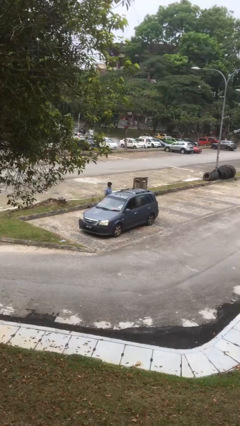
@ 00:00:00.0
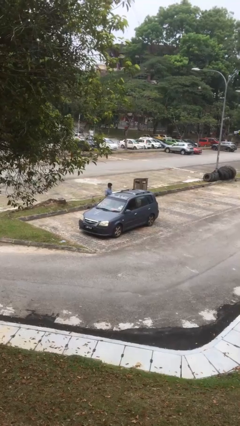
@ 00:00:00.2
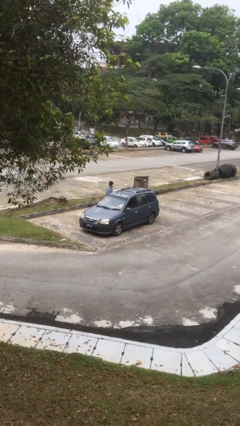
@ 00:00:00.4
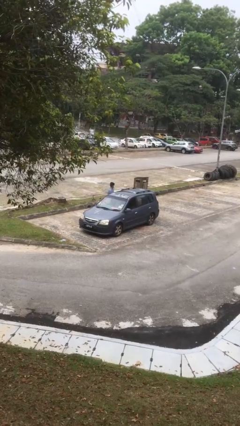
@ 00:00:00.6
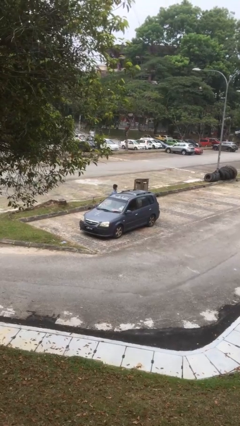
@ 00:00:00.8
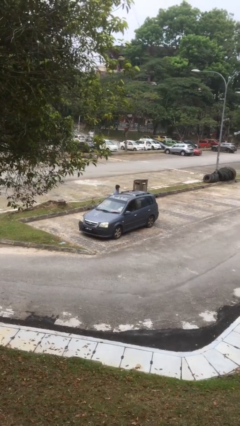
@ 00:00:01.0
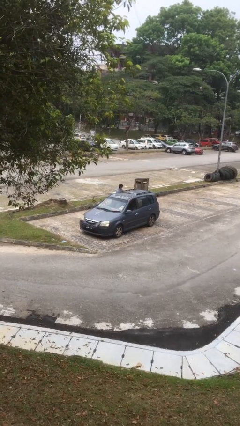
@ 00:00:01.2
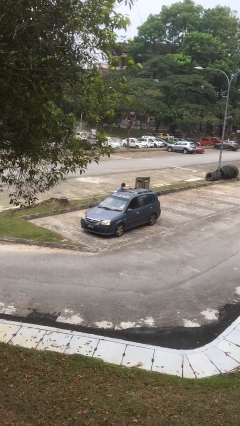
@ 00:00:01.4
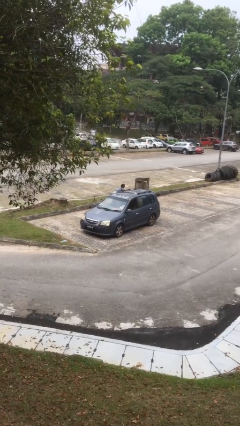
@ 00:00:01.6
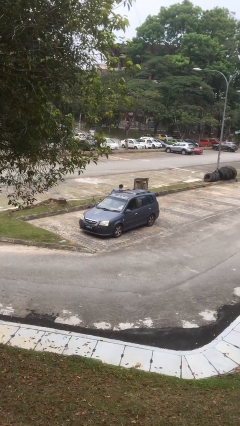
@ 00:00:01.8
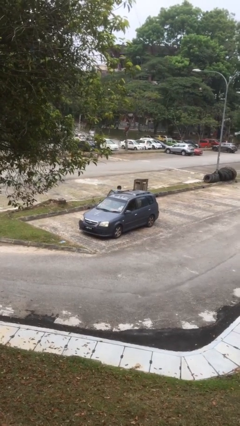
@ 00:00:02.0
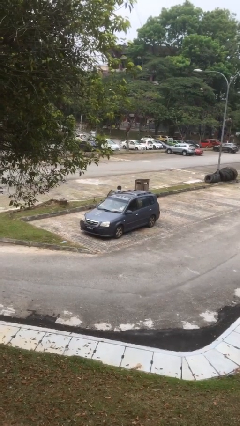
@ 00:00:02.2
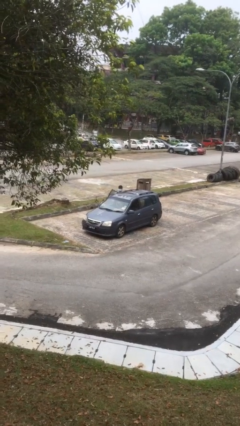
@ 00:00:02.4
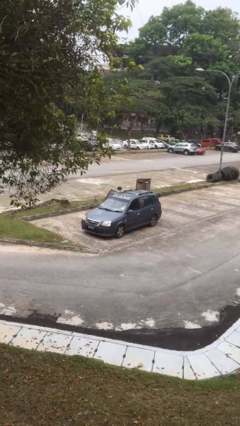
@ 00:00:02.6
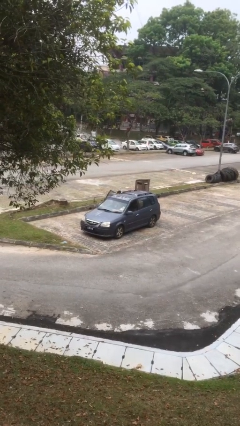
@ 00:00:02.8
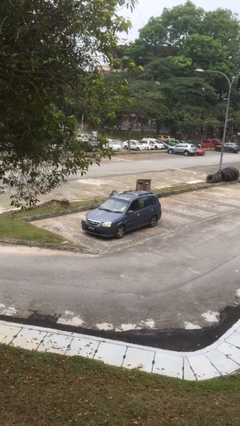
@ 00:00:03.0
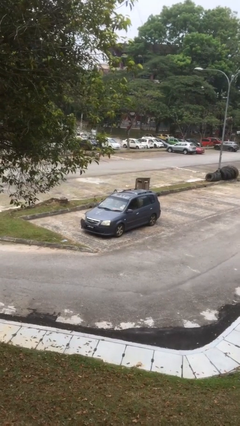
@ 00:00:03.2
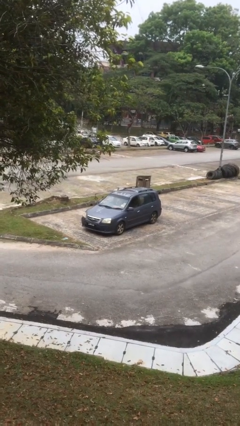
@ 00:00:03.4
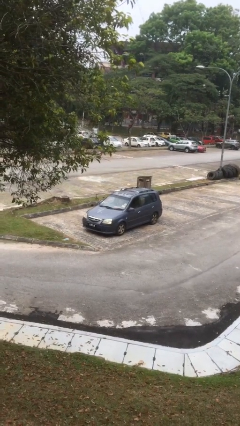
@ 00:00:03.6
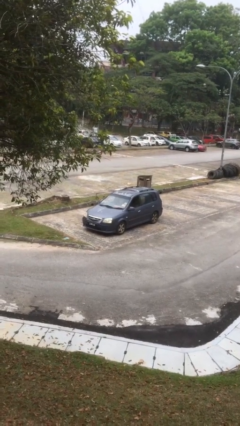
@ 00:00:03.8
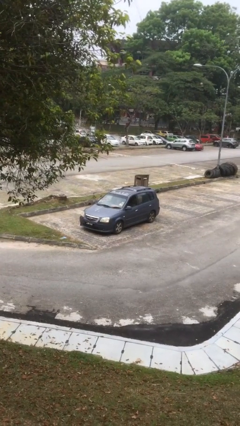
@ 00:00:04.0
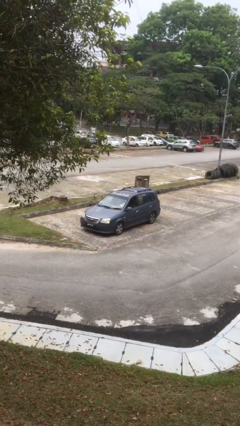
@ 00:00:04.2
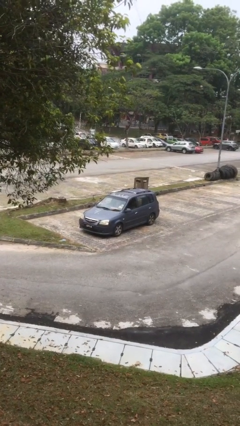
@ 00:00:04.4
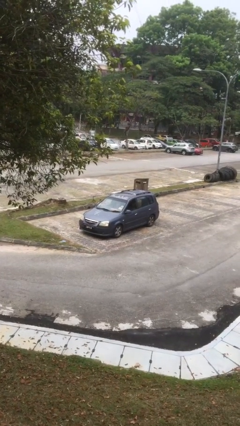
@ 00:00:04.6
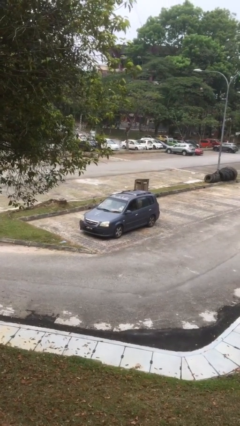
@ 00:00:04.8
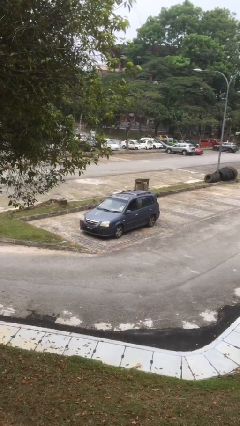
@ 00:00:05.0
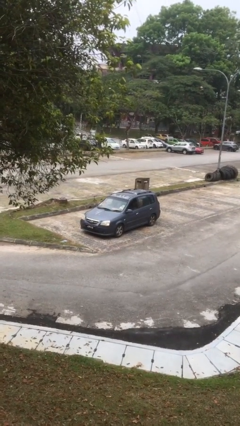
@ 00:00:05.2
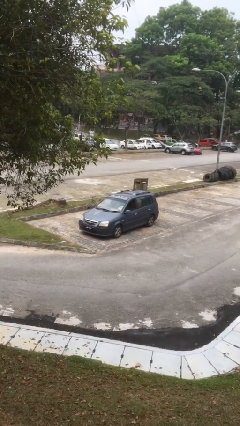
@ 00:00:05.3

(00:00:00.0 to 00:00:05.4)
car picks up person

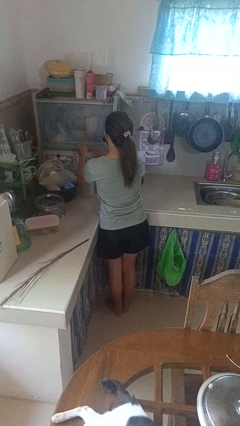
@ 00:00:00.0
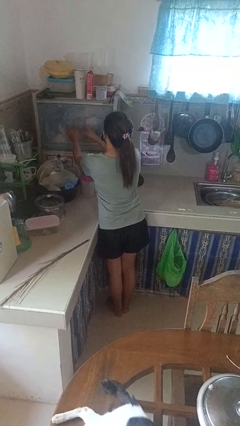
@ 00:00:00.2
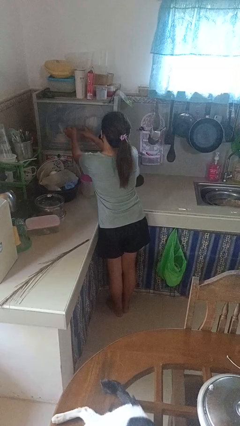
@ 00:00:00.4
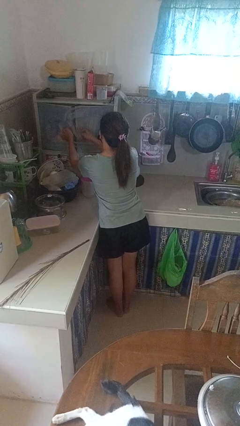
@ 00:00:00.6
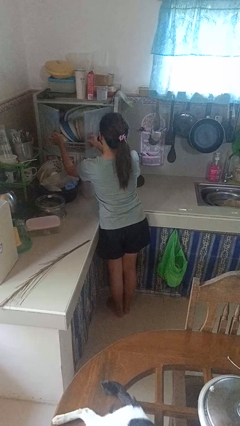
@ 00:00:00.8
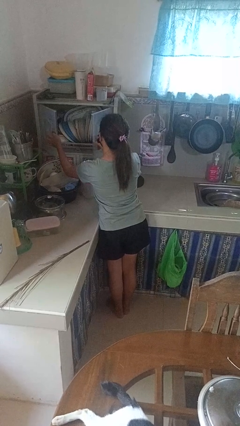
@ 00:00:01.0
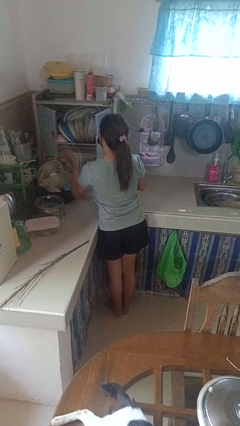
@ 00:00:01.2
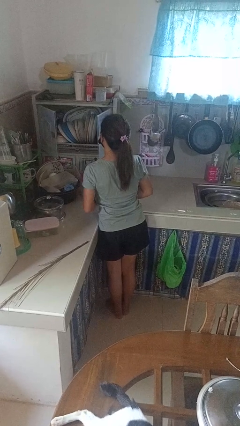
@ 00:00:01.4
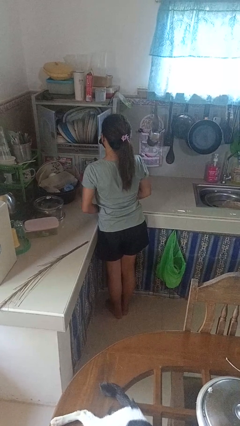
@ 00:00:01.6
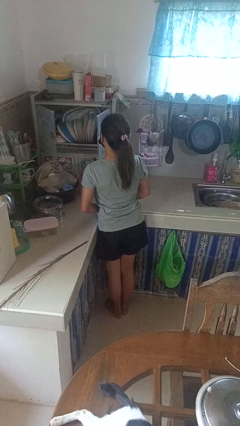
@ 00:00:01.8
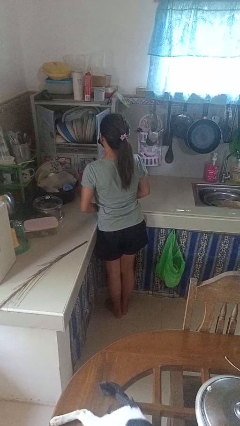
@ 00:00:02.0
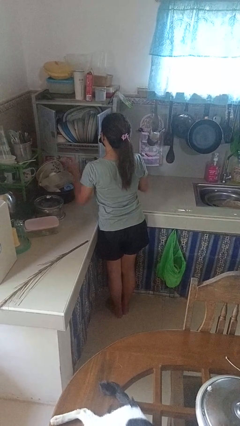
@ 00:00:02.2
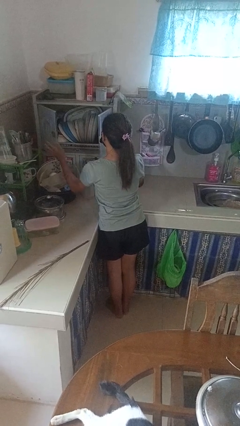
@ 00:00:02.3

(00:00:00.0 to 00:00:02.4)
person opens kitchen drawer

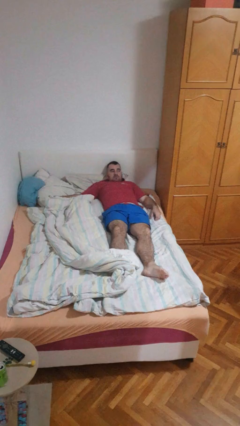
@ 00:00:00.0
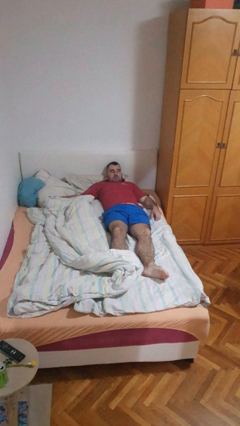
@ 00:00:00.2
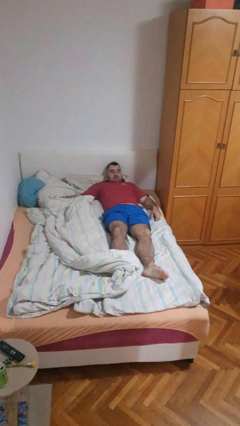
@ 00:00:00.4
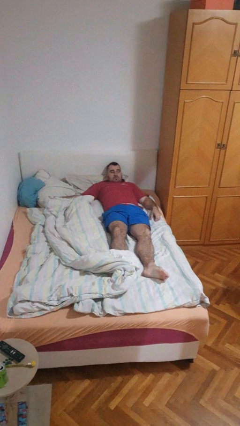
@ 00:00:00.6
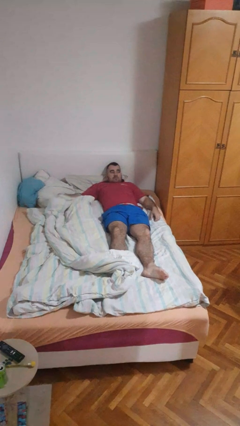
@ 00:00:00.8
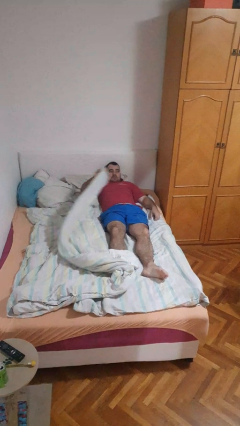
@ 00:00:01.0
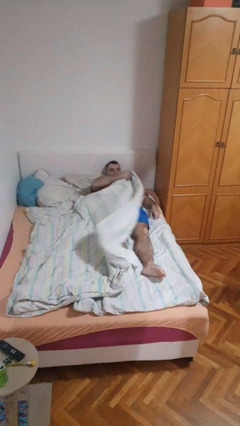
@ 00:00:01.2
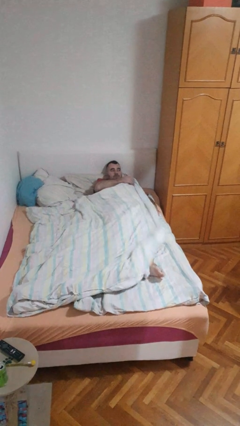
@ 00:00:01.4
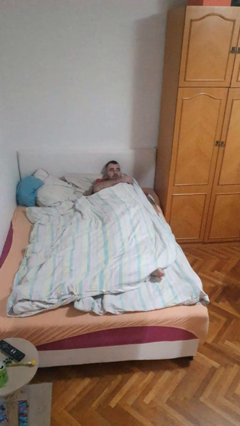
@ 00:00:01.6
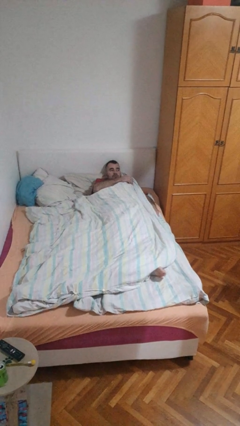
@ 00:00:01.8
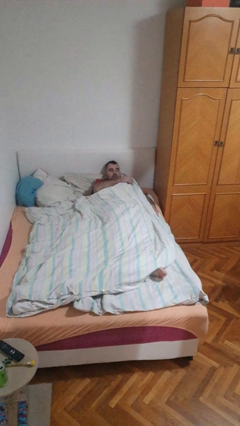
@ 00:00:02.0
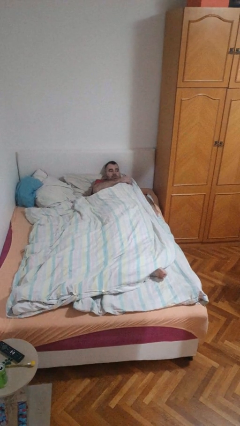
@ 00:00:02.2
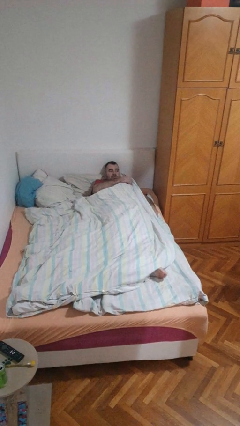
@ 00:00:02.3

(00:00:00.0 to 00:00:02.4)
person covers with bedsheets

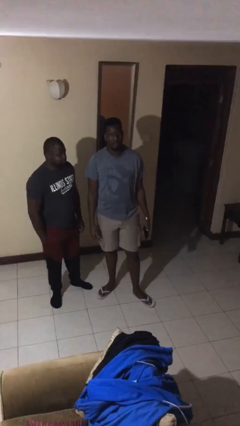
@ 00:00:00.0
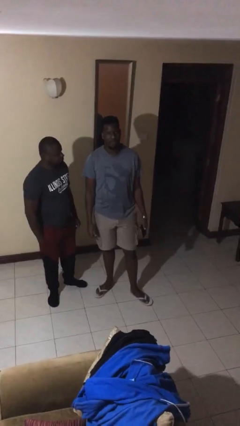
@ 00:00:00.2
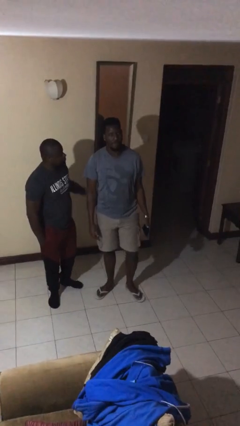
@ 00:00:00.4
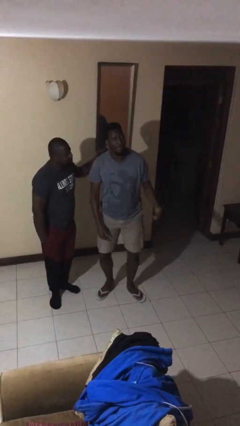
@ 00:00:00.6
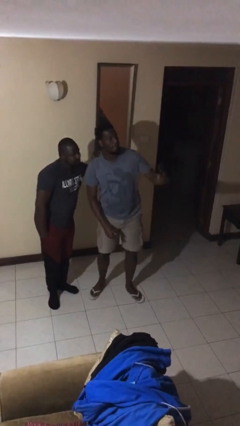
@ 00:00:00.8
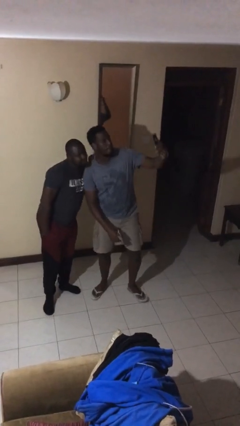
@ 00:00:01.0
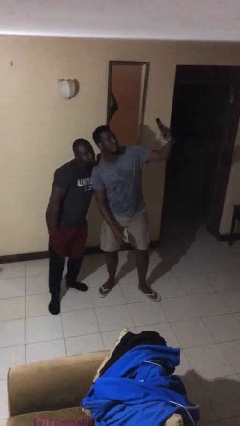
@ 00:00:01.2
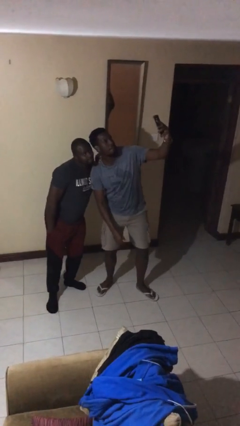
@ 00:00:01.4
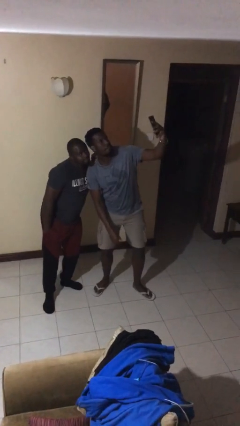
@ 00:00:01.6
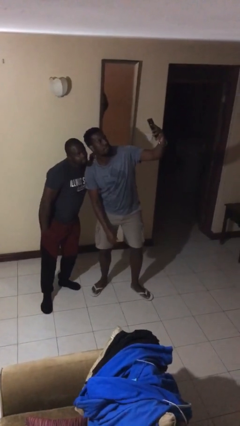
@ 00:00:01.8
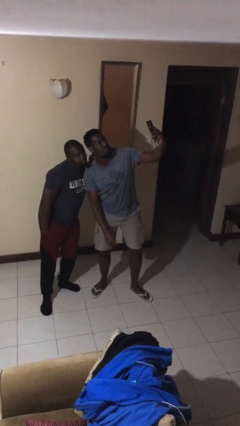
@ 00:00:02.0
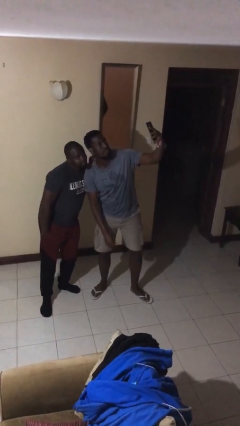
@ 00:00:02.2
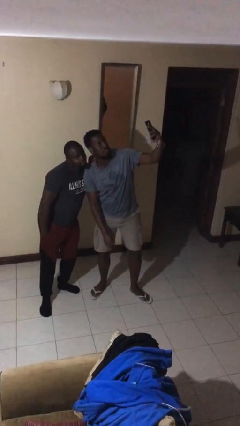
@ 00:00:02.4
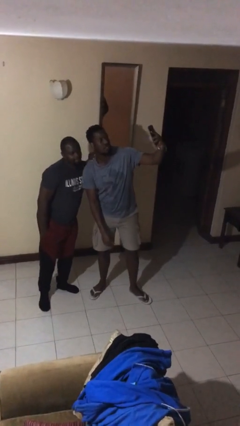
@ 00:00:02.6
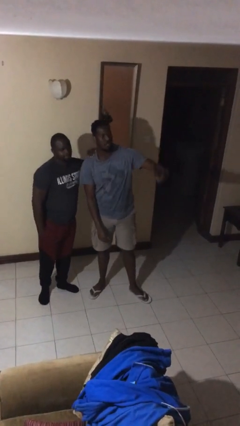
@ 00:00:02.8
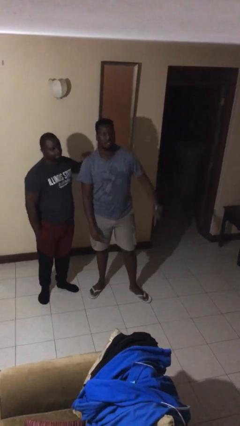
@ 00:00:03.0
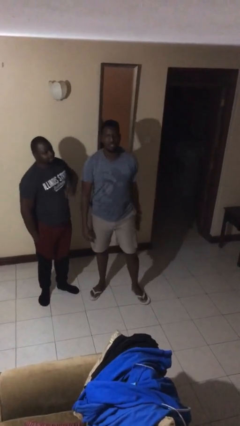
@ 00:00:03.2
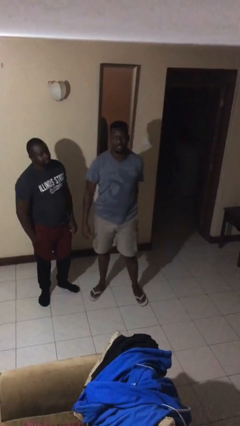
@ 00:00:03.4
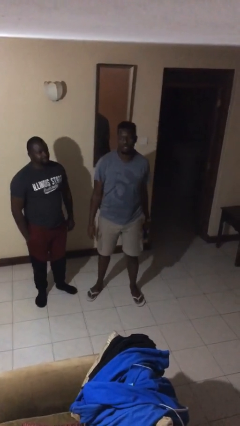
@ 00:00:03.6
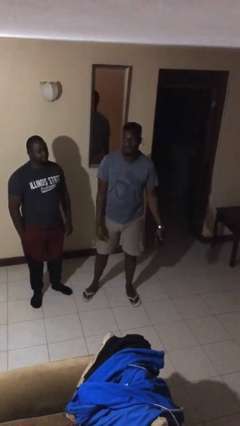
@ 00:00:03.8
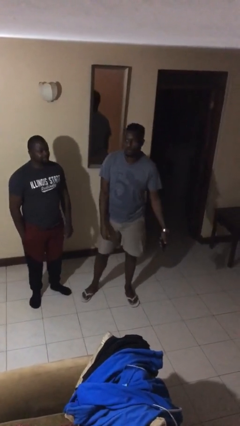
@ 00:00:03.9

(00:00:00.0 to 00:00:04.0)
person takes selfie with person

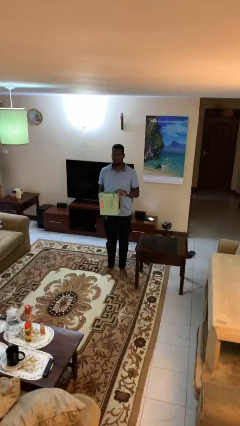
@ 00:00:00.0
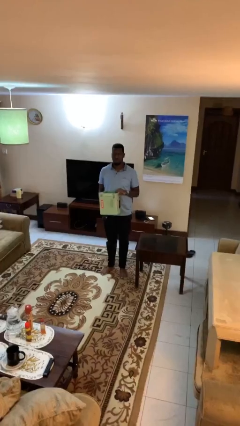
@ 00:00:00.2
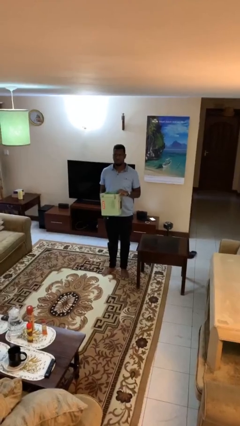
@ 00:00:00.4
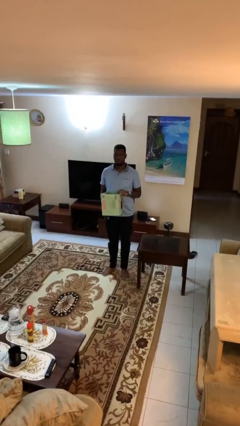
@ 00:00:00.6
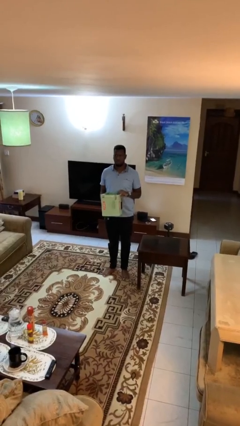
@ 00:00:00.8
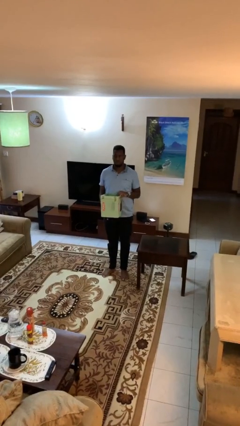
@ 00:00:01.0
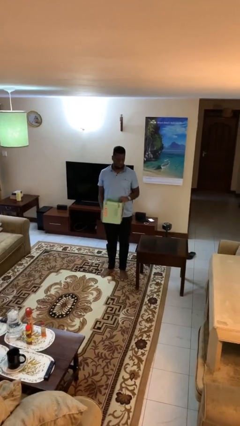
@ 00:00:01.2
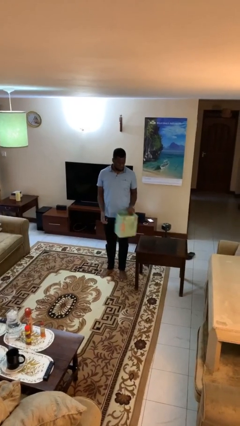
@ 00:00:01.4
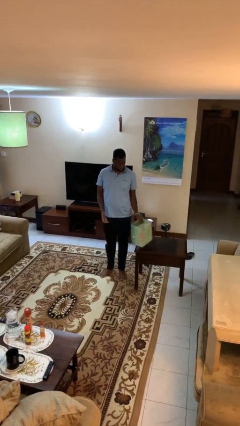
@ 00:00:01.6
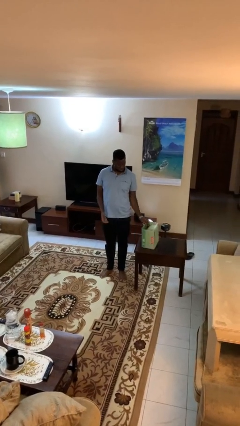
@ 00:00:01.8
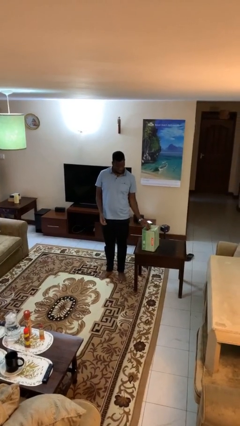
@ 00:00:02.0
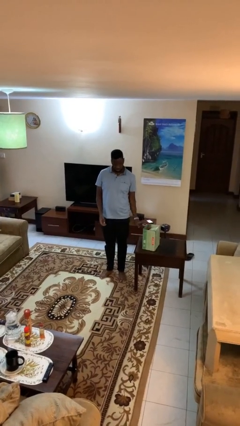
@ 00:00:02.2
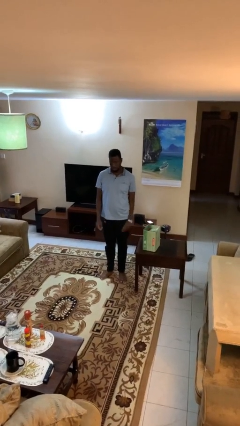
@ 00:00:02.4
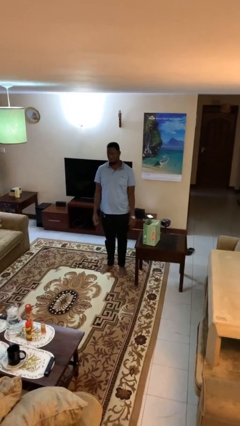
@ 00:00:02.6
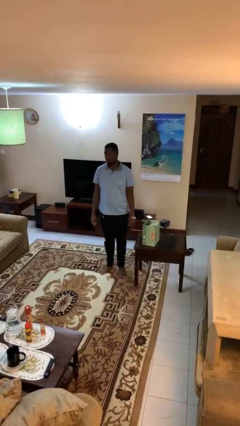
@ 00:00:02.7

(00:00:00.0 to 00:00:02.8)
person puts down object on table
